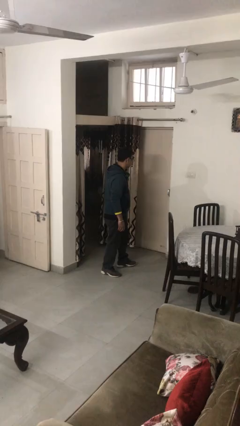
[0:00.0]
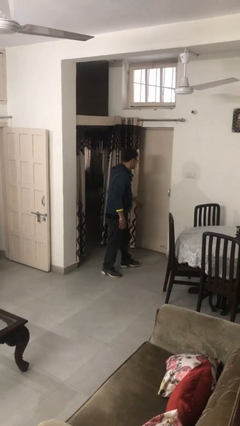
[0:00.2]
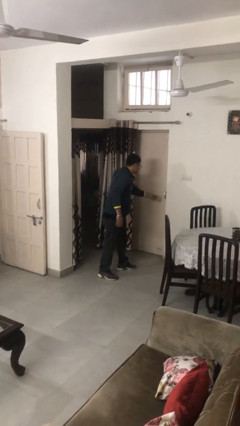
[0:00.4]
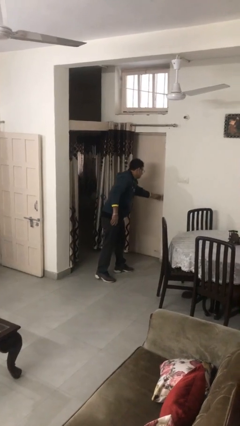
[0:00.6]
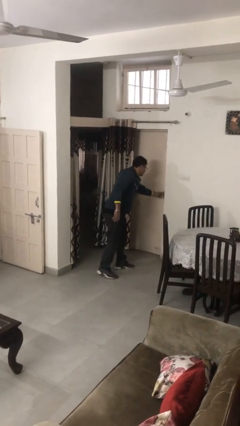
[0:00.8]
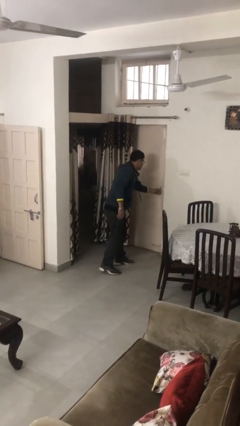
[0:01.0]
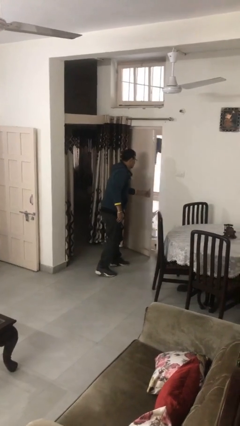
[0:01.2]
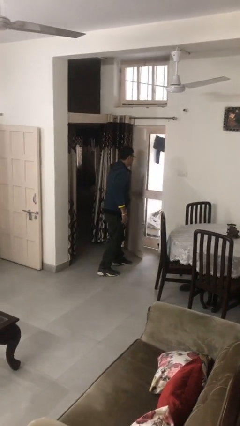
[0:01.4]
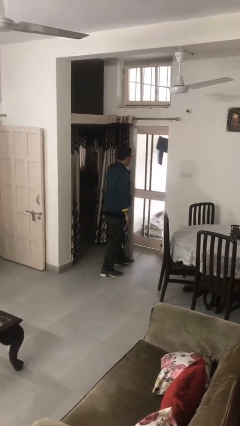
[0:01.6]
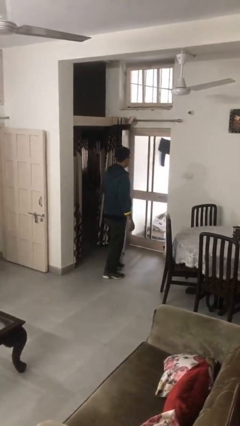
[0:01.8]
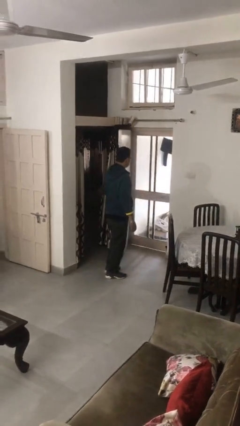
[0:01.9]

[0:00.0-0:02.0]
person opens facility door

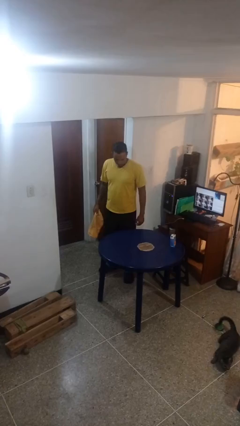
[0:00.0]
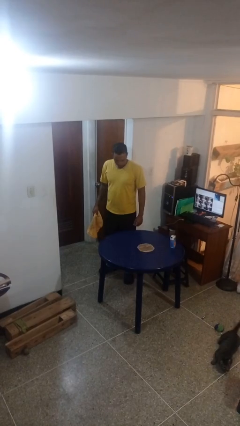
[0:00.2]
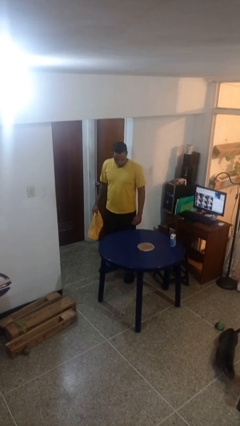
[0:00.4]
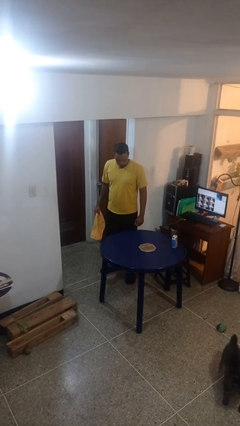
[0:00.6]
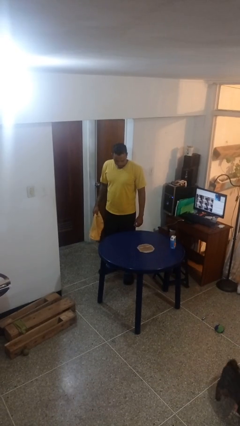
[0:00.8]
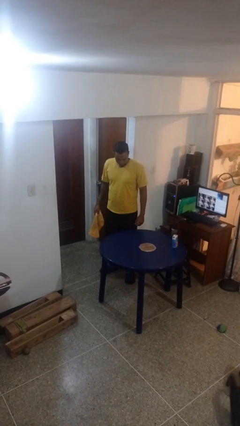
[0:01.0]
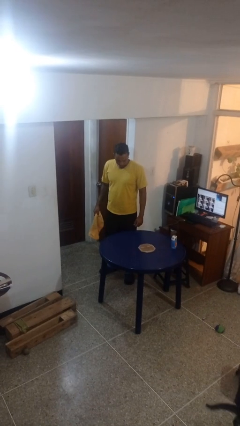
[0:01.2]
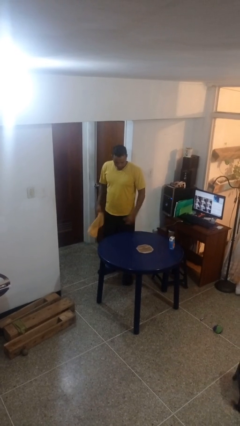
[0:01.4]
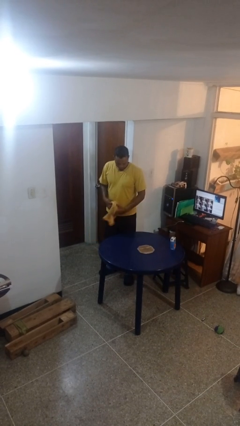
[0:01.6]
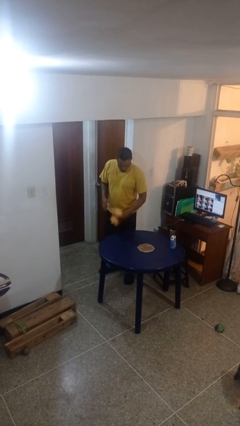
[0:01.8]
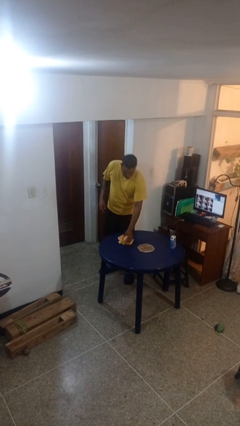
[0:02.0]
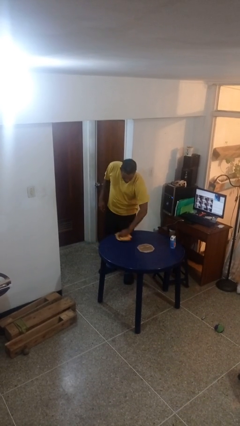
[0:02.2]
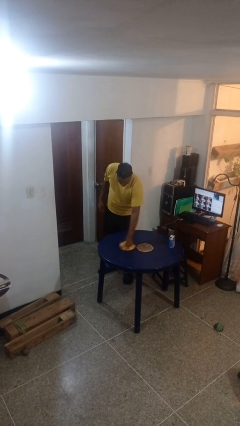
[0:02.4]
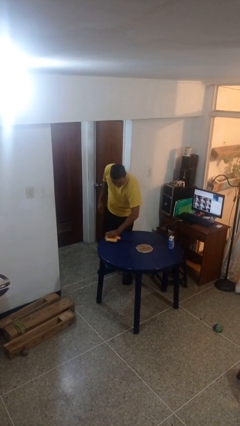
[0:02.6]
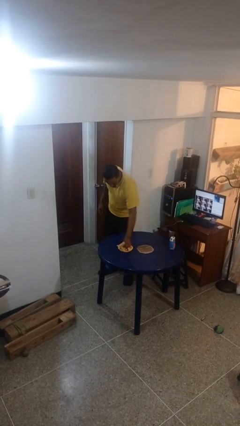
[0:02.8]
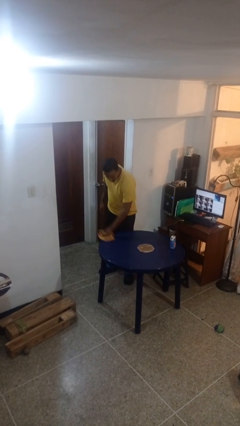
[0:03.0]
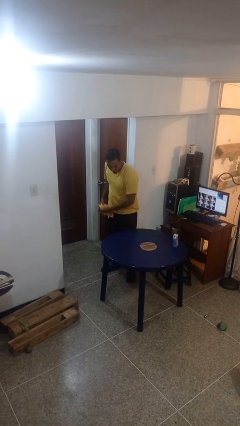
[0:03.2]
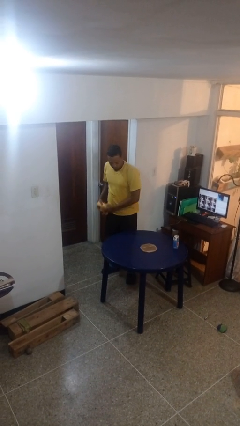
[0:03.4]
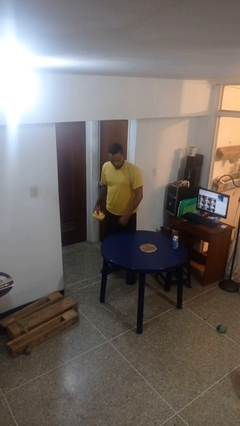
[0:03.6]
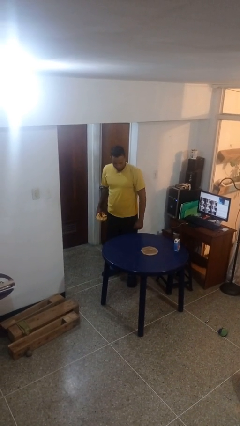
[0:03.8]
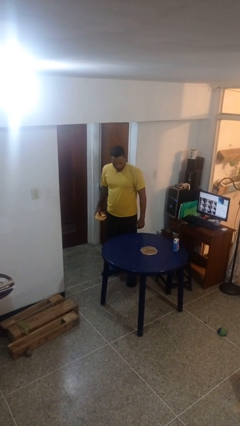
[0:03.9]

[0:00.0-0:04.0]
person cleans table with rag

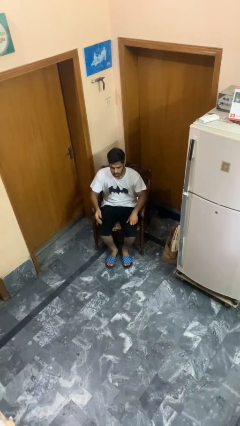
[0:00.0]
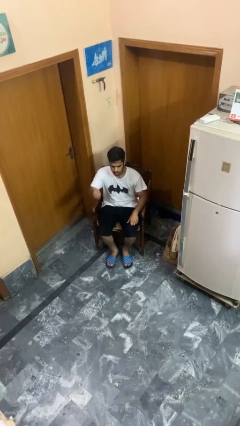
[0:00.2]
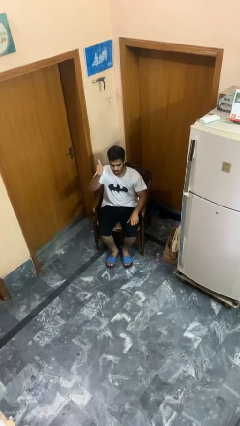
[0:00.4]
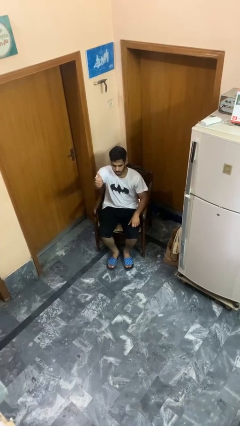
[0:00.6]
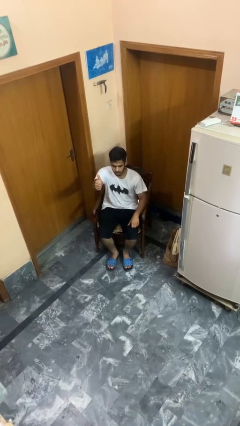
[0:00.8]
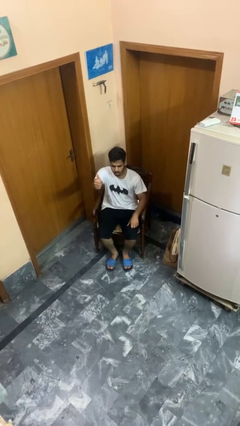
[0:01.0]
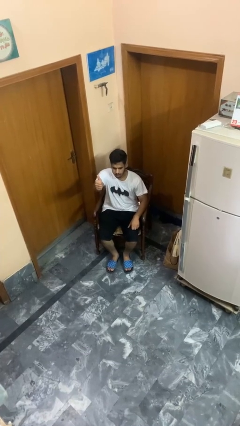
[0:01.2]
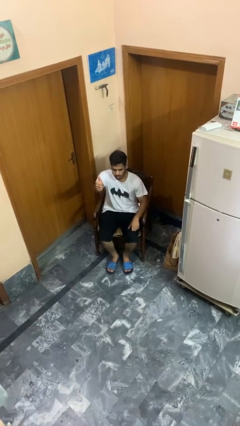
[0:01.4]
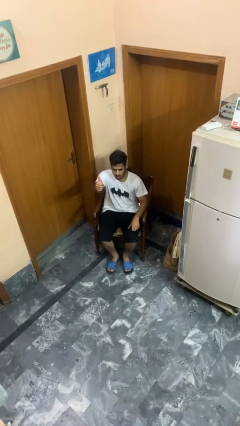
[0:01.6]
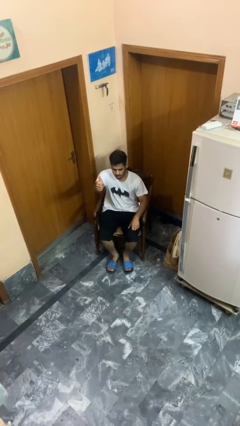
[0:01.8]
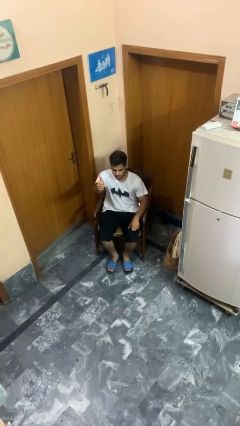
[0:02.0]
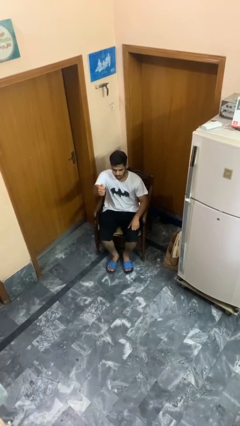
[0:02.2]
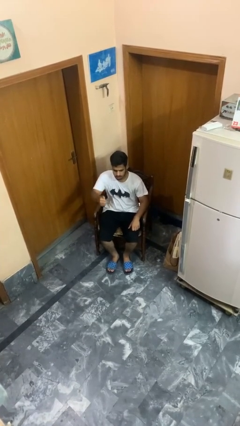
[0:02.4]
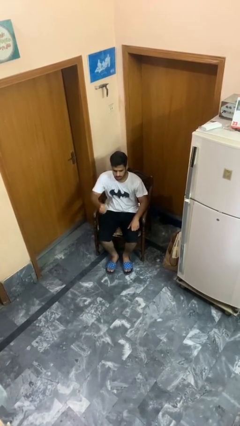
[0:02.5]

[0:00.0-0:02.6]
person gestures thumbs up

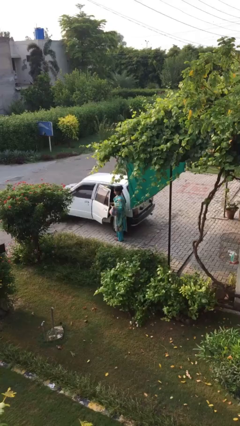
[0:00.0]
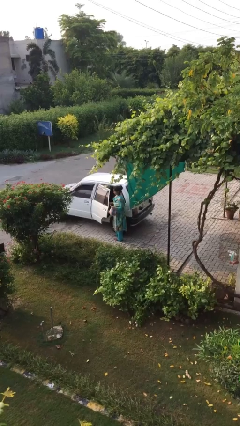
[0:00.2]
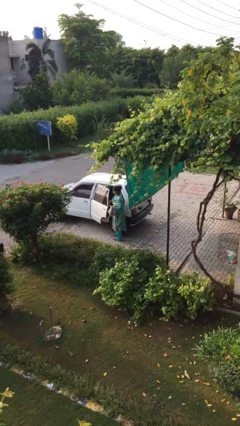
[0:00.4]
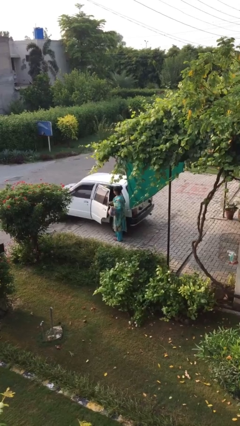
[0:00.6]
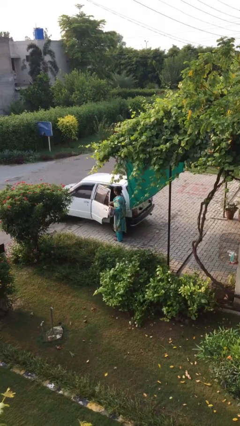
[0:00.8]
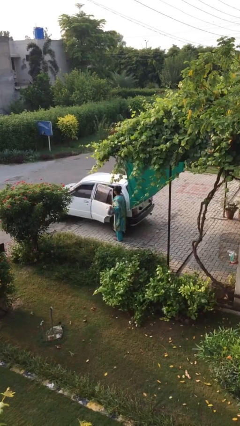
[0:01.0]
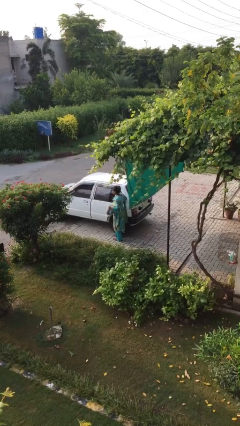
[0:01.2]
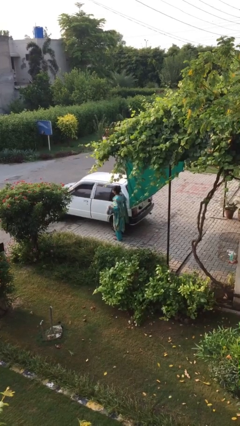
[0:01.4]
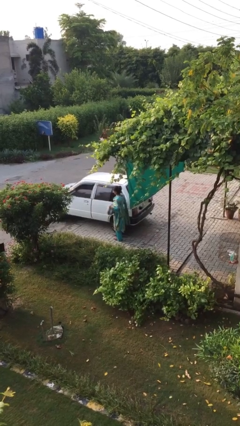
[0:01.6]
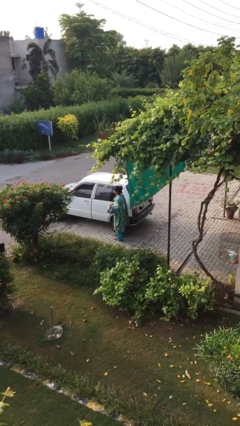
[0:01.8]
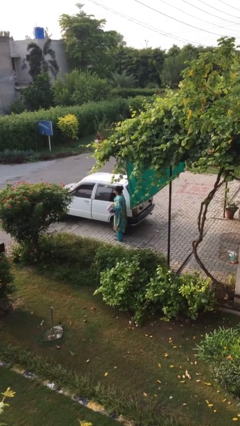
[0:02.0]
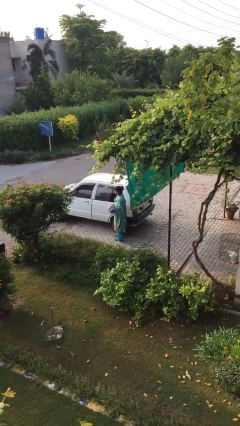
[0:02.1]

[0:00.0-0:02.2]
person closes car door

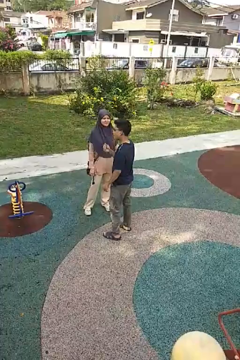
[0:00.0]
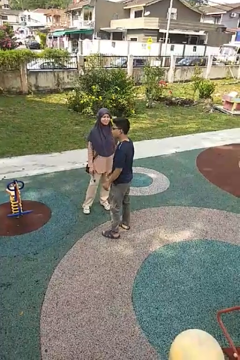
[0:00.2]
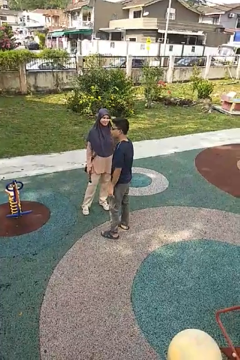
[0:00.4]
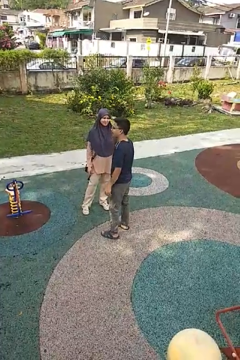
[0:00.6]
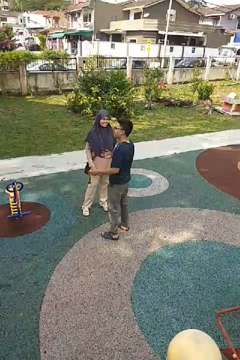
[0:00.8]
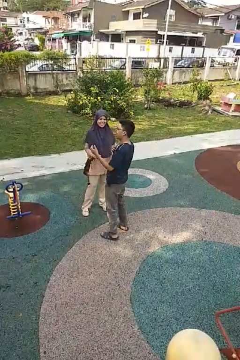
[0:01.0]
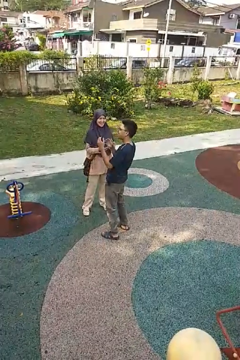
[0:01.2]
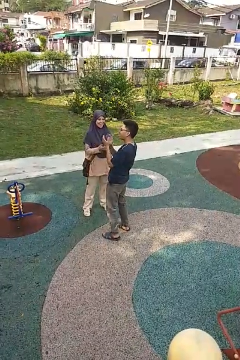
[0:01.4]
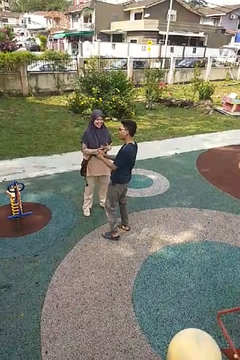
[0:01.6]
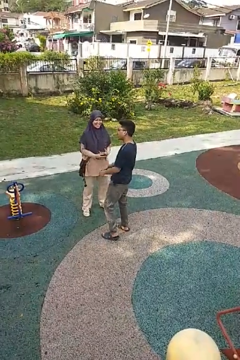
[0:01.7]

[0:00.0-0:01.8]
person laughs with person

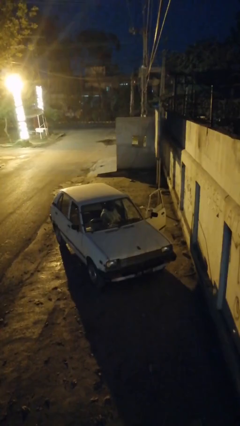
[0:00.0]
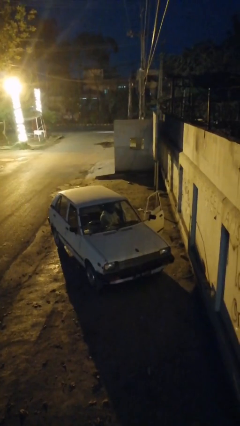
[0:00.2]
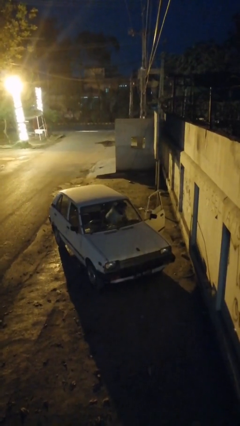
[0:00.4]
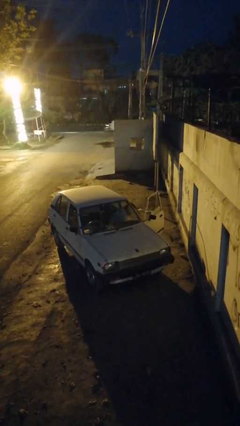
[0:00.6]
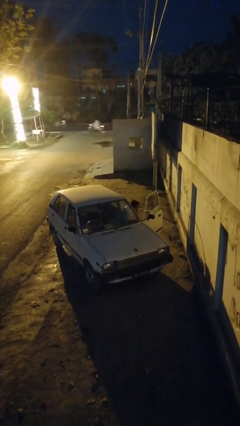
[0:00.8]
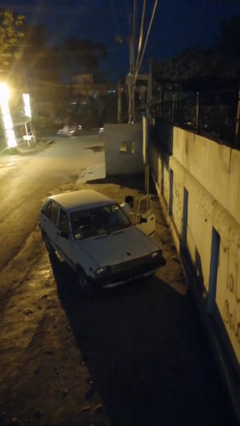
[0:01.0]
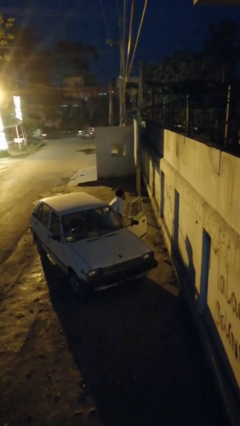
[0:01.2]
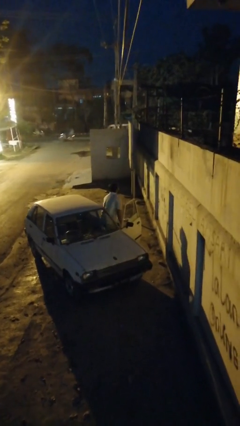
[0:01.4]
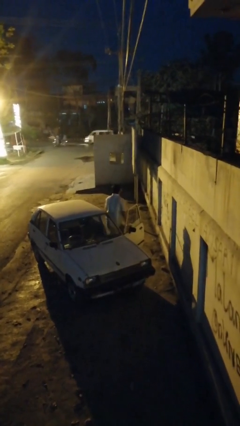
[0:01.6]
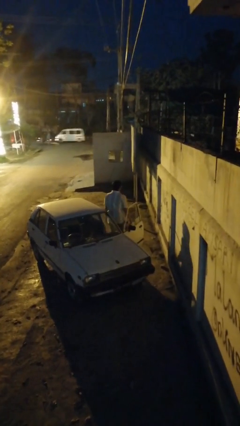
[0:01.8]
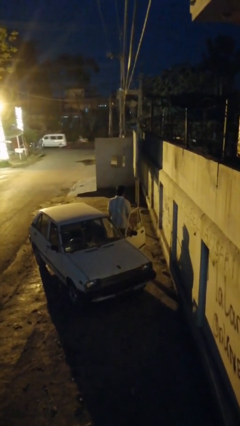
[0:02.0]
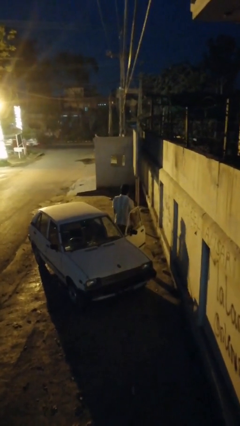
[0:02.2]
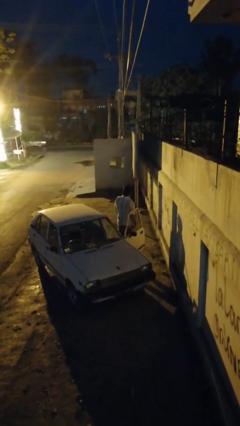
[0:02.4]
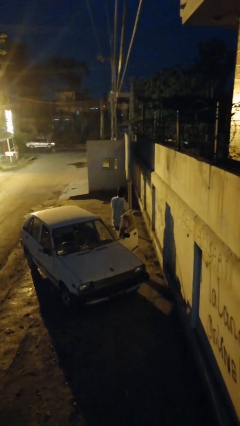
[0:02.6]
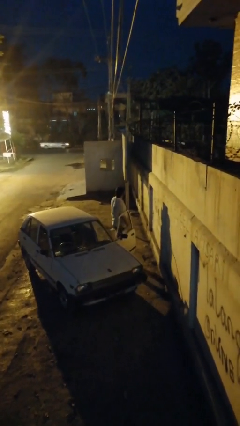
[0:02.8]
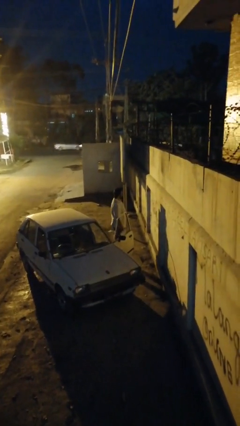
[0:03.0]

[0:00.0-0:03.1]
person exits car

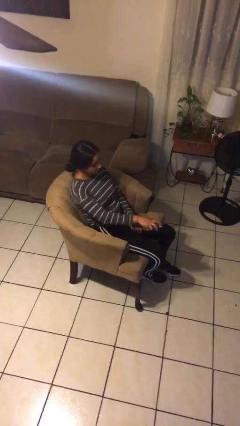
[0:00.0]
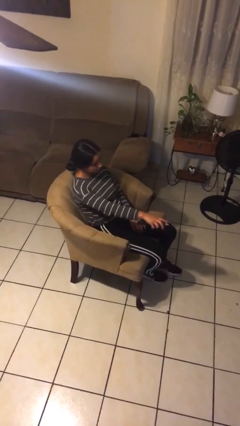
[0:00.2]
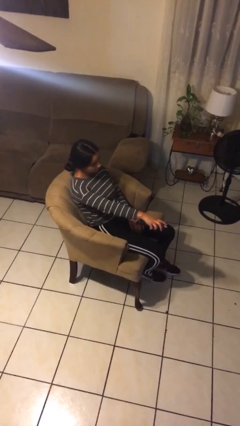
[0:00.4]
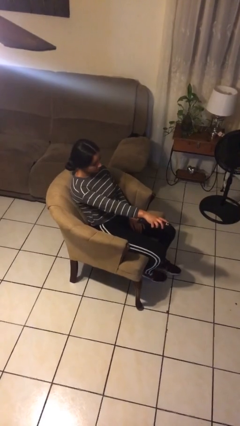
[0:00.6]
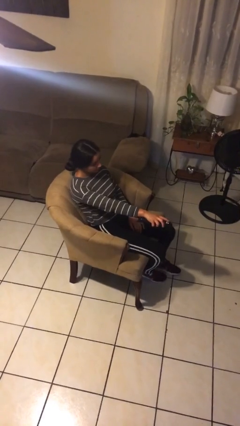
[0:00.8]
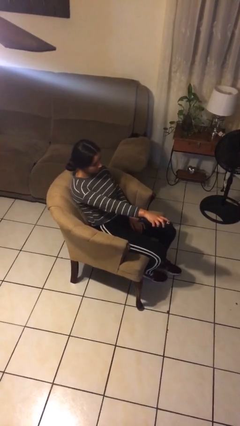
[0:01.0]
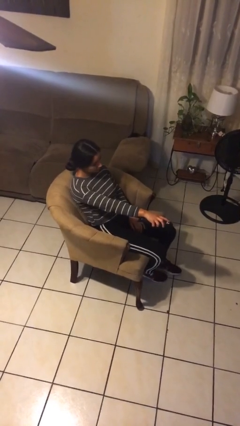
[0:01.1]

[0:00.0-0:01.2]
person uses television remote

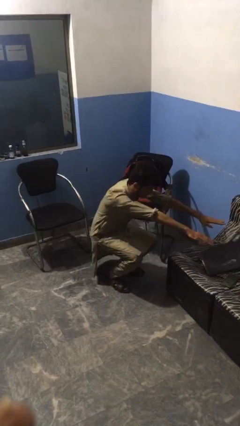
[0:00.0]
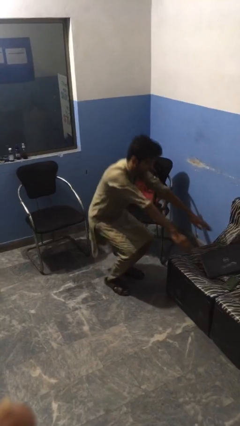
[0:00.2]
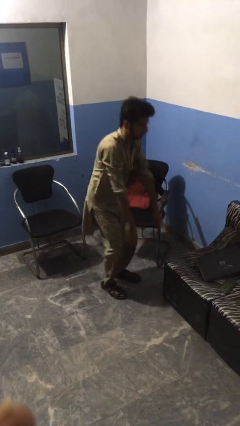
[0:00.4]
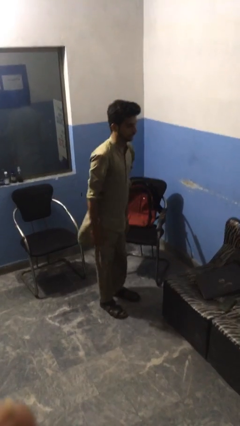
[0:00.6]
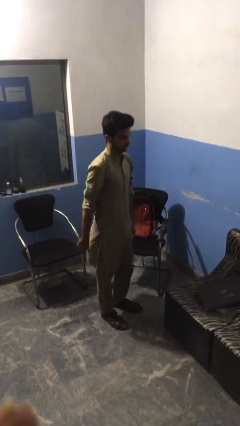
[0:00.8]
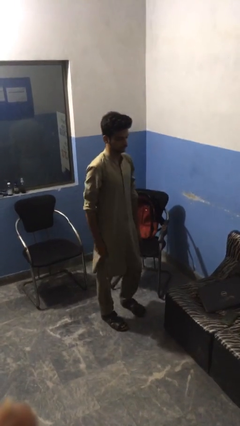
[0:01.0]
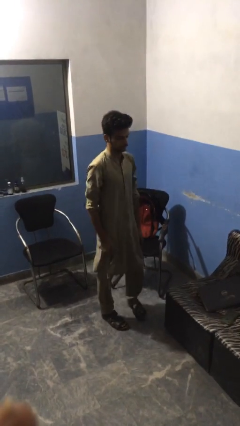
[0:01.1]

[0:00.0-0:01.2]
person stands up
